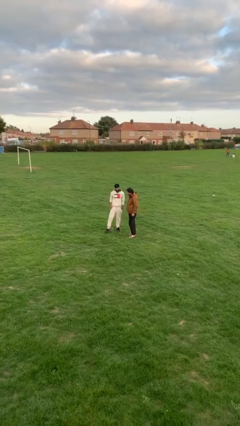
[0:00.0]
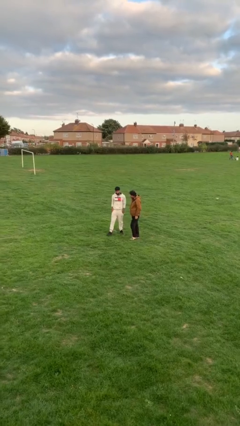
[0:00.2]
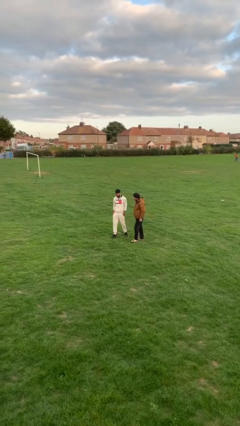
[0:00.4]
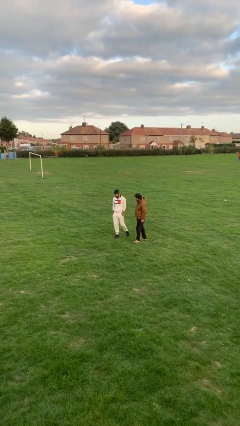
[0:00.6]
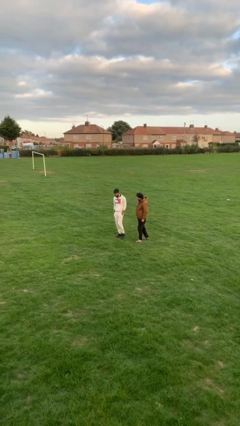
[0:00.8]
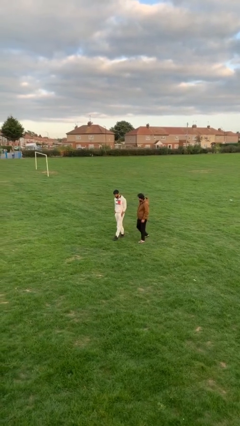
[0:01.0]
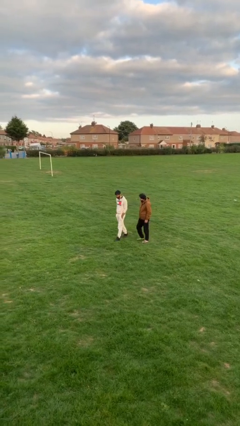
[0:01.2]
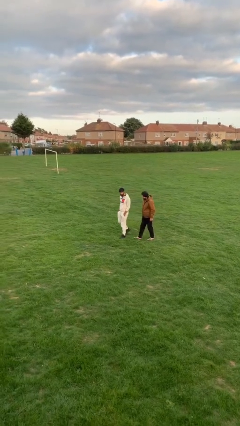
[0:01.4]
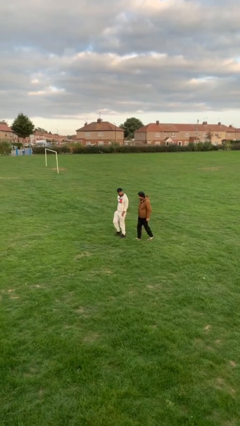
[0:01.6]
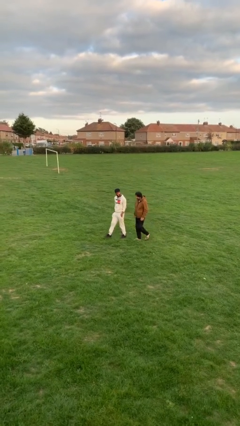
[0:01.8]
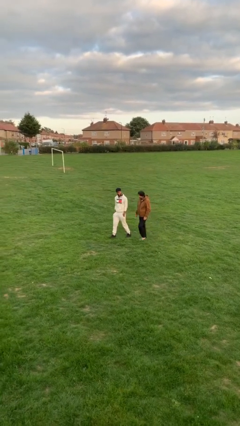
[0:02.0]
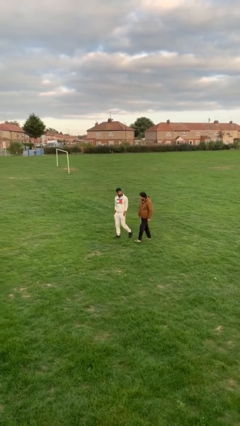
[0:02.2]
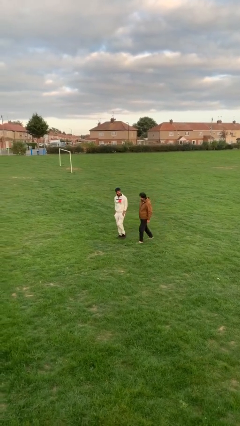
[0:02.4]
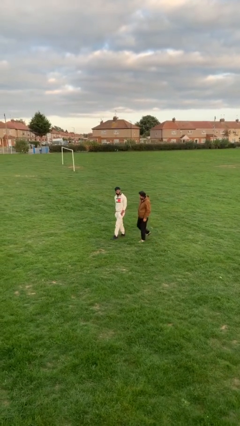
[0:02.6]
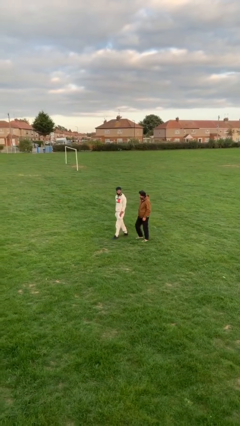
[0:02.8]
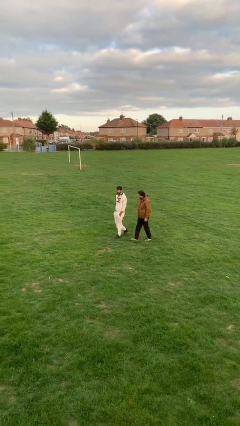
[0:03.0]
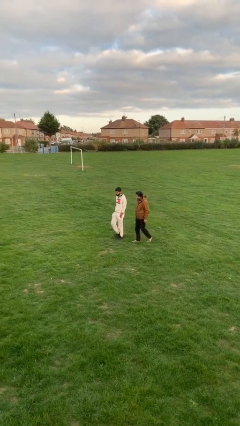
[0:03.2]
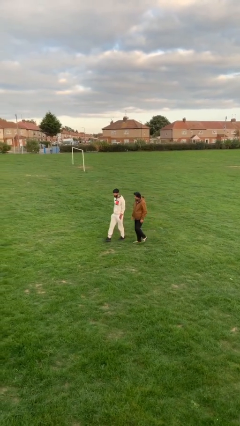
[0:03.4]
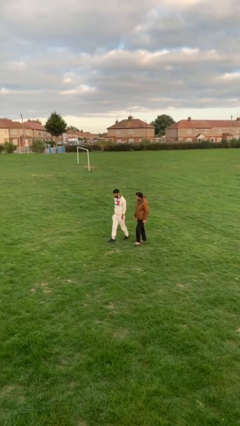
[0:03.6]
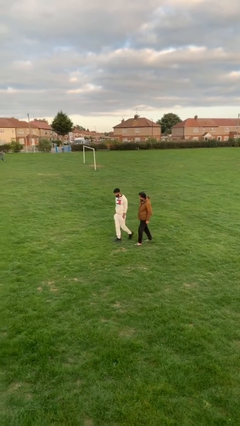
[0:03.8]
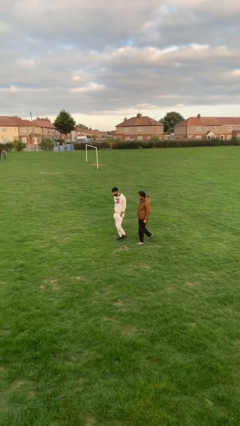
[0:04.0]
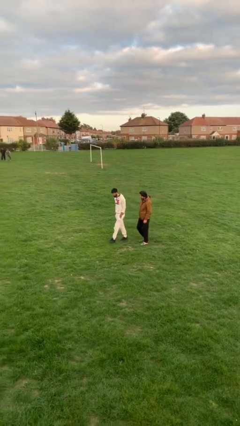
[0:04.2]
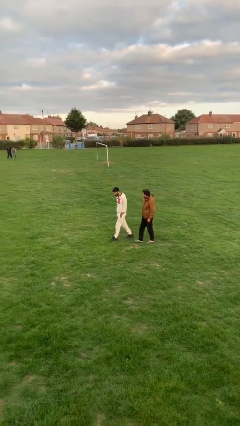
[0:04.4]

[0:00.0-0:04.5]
person talks to person

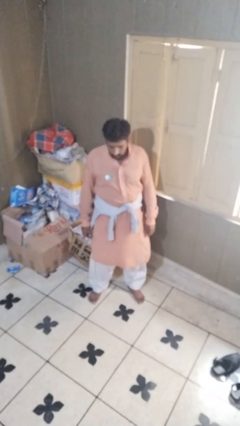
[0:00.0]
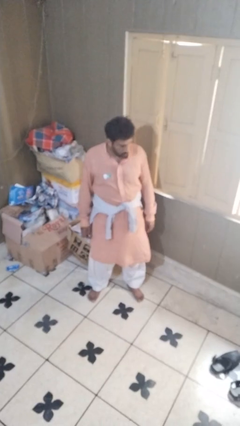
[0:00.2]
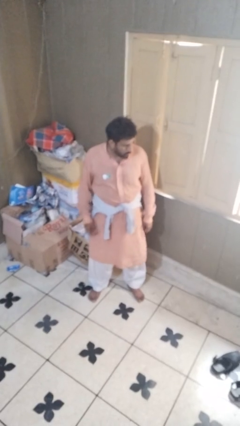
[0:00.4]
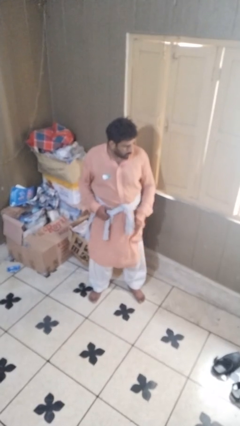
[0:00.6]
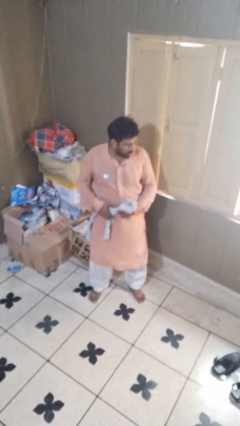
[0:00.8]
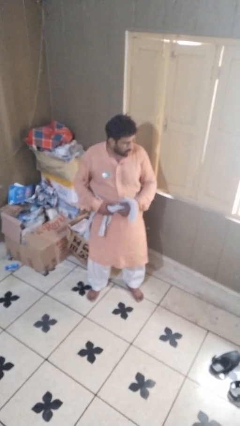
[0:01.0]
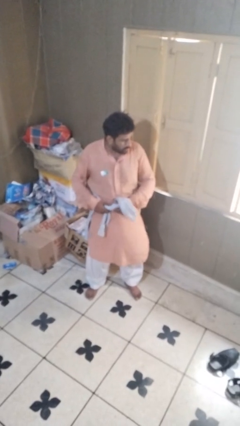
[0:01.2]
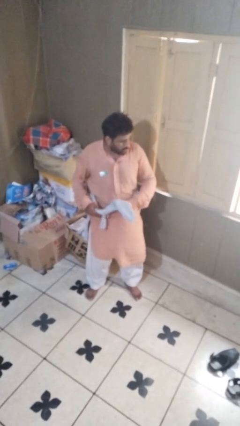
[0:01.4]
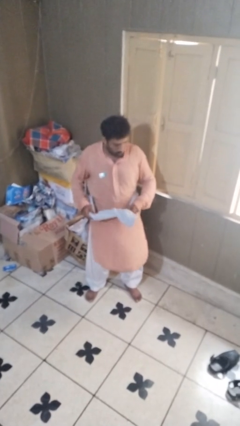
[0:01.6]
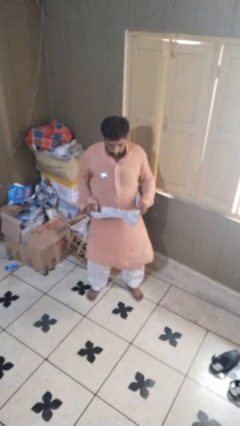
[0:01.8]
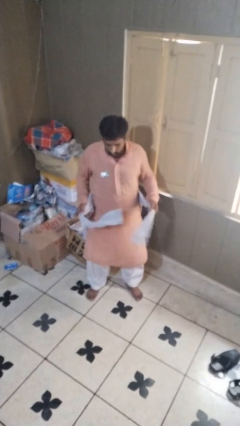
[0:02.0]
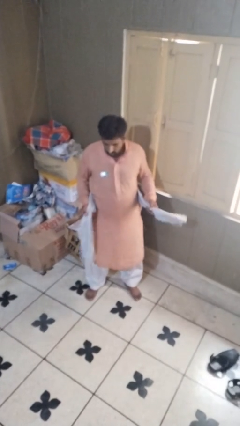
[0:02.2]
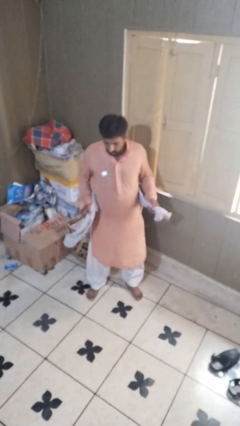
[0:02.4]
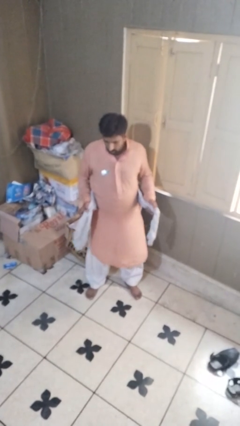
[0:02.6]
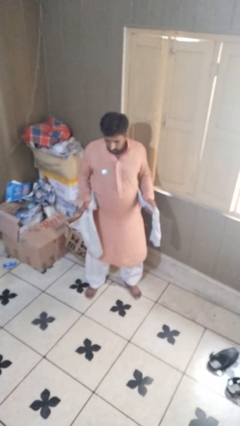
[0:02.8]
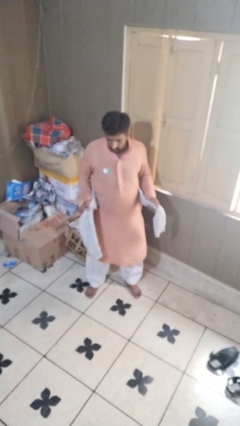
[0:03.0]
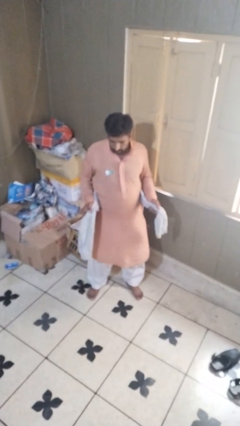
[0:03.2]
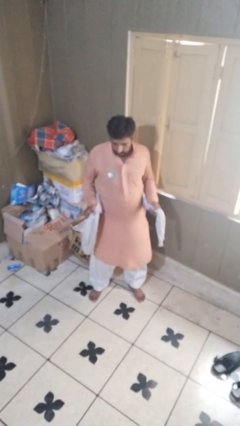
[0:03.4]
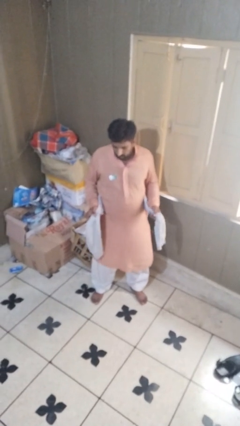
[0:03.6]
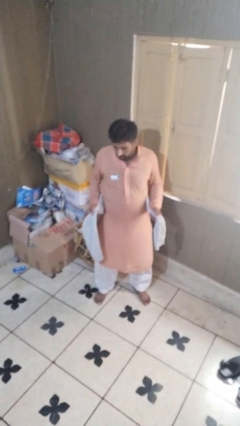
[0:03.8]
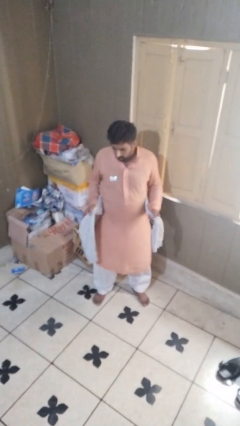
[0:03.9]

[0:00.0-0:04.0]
person unties jacket around waist

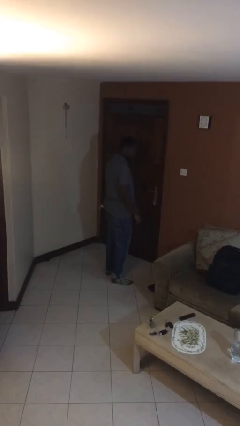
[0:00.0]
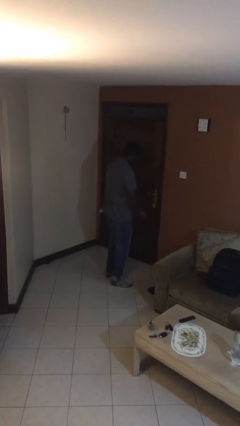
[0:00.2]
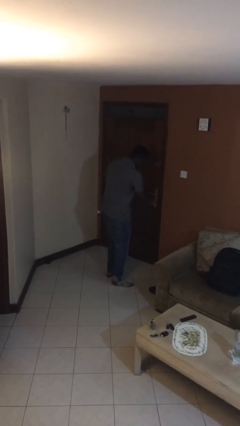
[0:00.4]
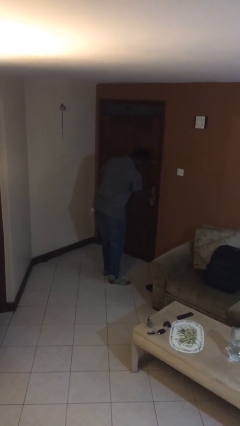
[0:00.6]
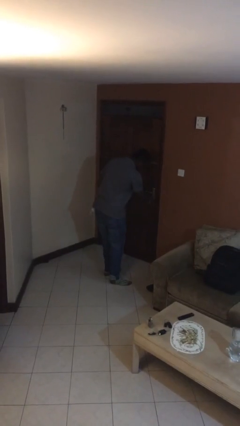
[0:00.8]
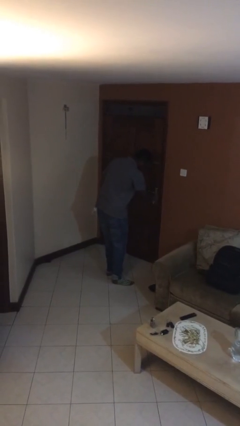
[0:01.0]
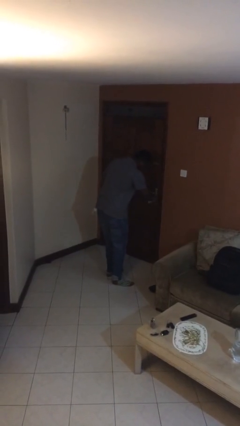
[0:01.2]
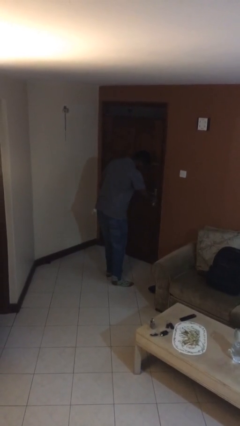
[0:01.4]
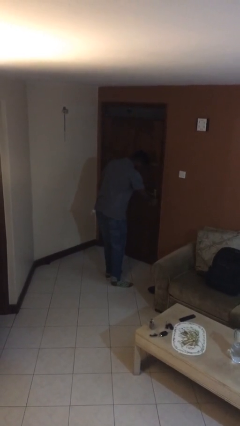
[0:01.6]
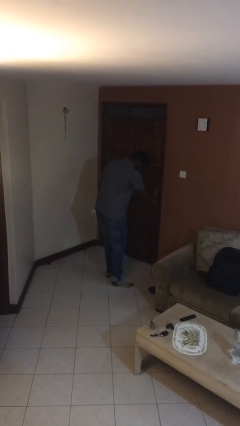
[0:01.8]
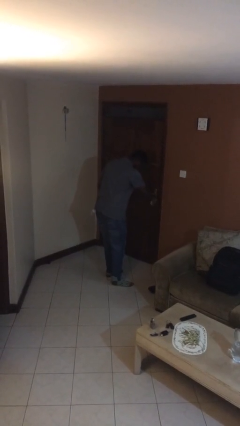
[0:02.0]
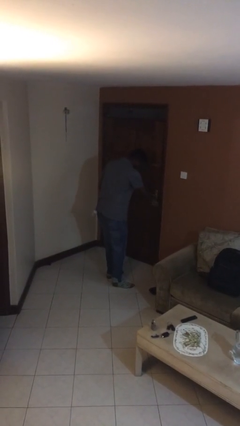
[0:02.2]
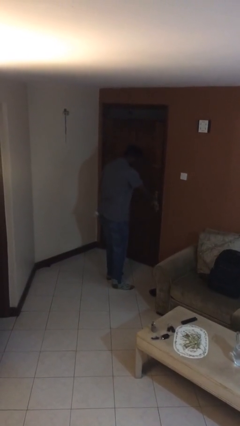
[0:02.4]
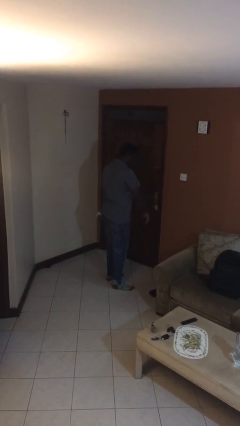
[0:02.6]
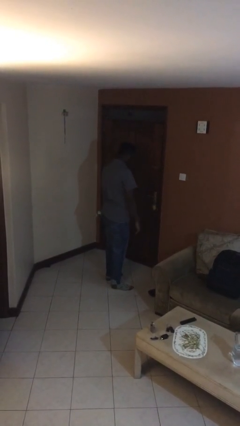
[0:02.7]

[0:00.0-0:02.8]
person locks door with keys

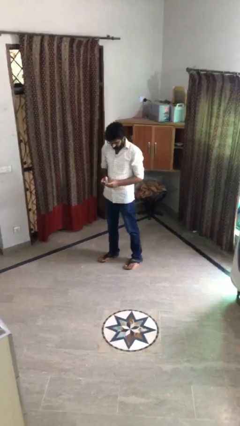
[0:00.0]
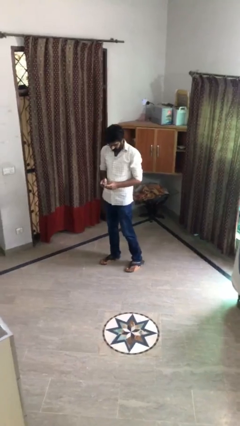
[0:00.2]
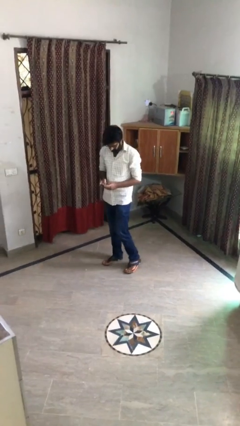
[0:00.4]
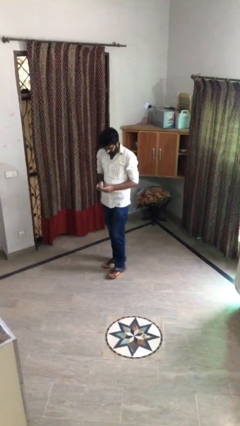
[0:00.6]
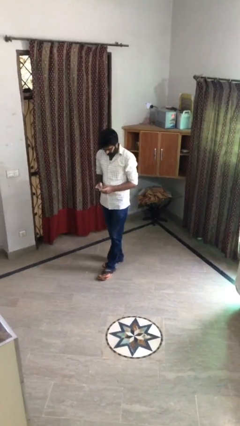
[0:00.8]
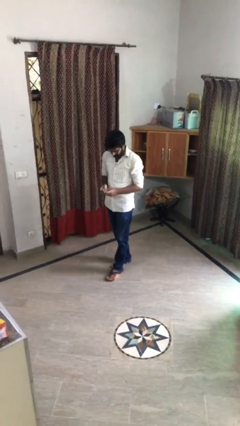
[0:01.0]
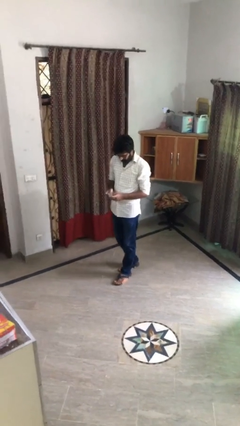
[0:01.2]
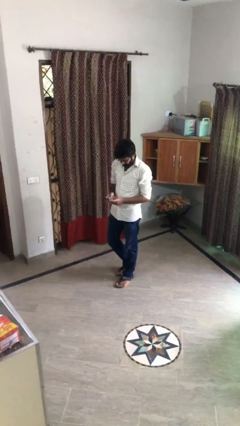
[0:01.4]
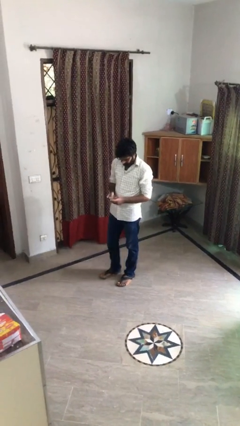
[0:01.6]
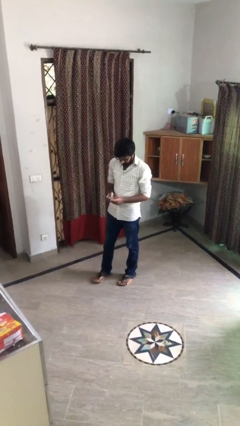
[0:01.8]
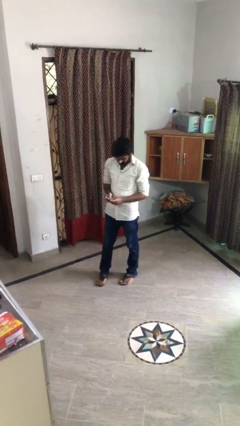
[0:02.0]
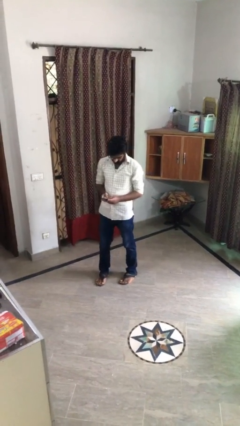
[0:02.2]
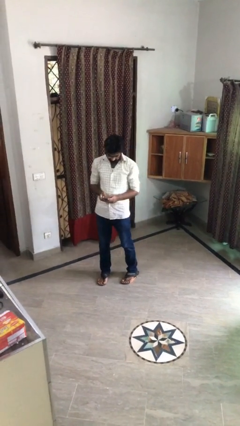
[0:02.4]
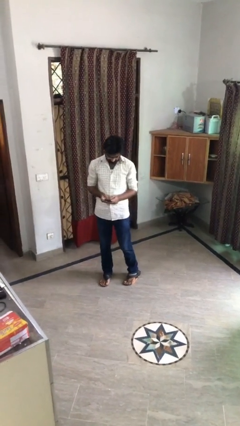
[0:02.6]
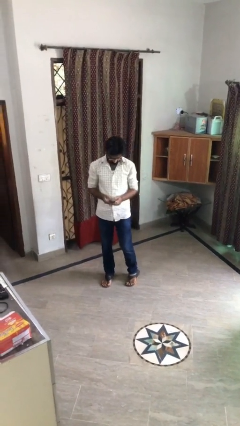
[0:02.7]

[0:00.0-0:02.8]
person texts on phone

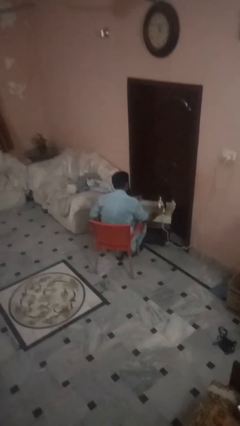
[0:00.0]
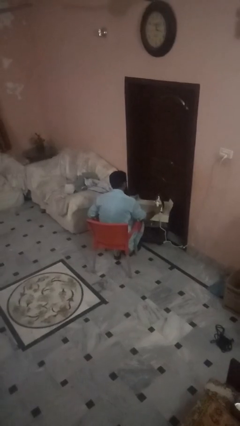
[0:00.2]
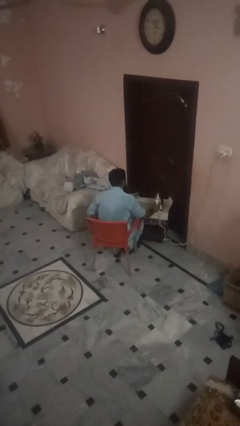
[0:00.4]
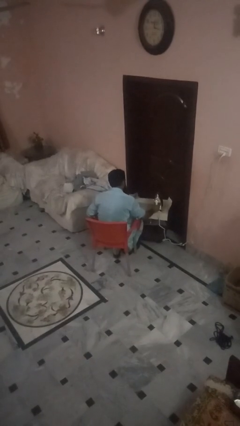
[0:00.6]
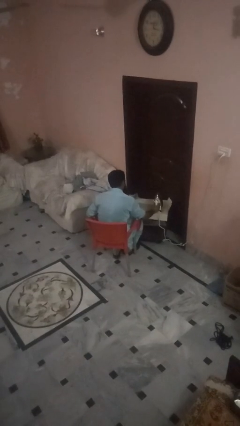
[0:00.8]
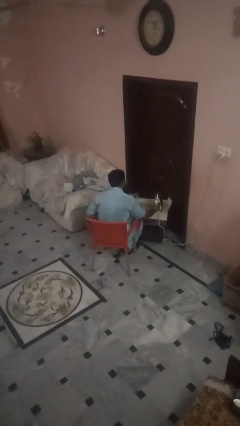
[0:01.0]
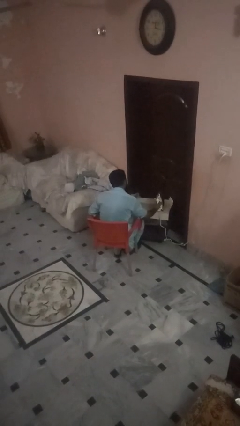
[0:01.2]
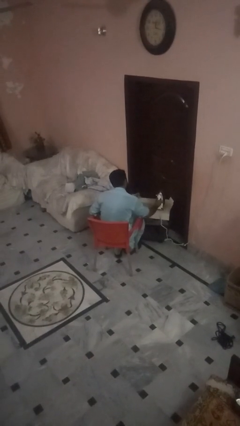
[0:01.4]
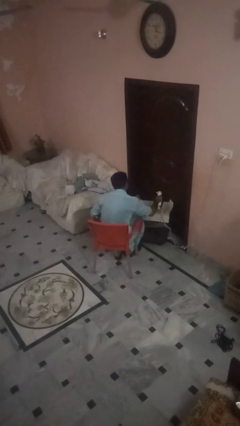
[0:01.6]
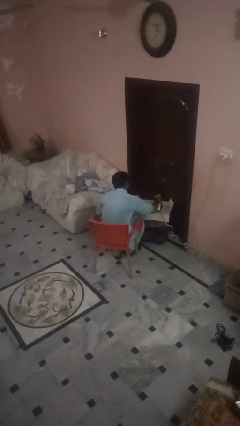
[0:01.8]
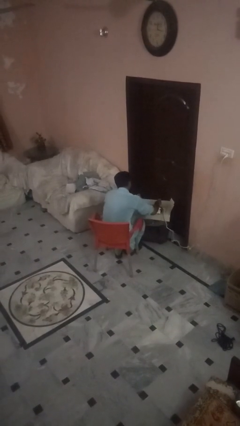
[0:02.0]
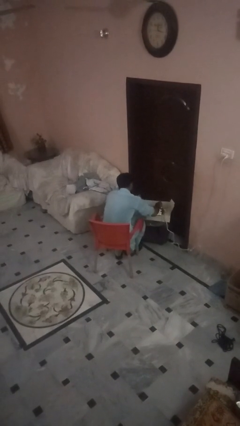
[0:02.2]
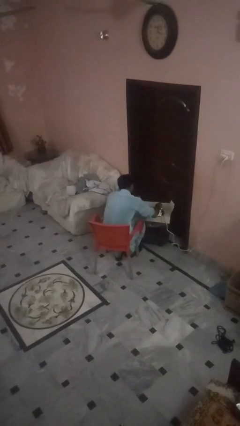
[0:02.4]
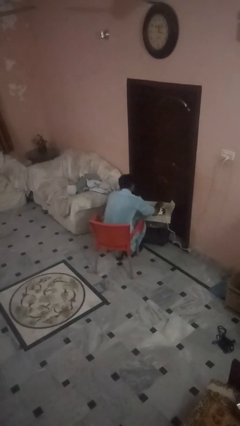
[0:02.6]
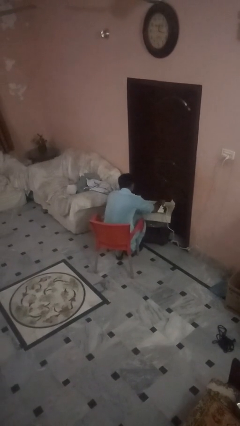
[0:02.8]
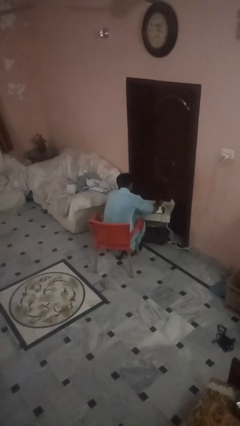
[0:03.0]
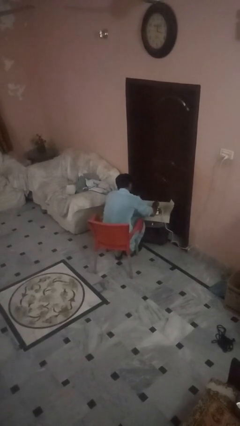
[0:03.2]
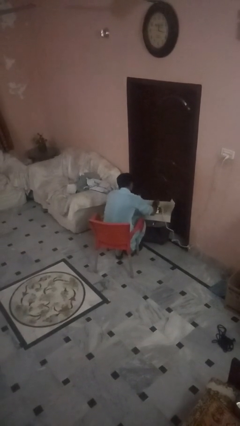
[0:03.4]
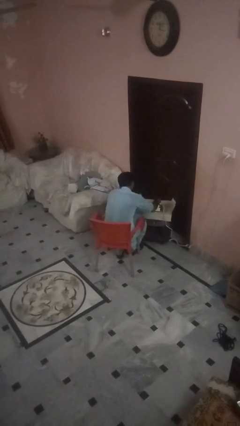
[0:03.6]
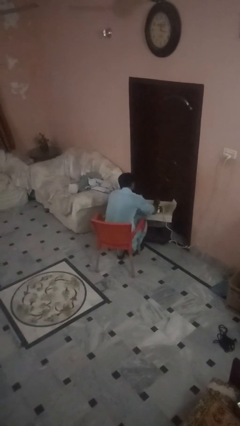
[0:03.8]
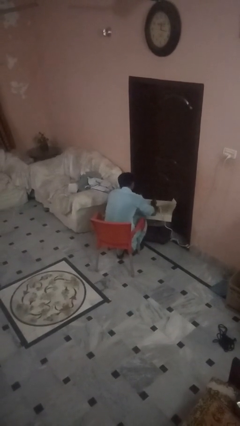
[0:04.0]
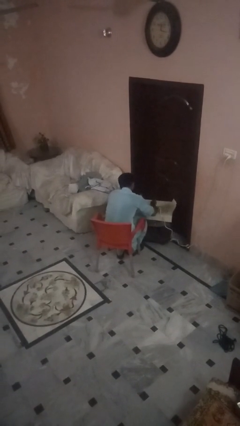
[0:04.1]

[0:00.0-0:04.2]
person irons clothes
